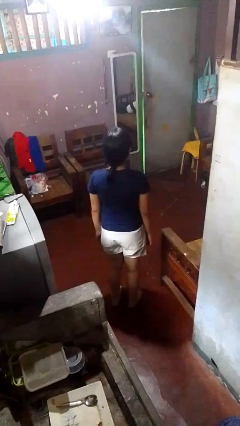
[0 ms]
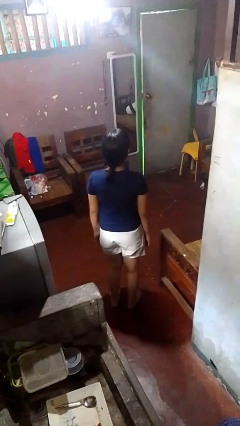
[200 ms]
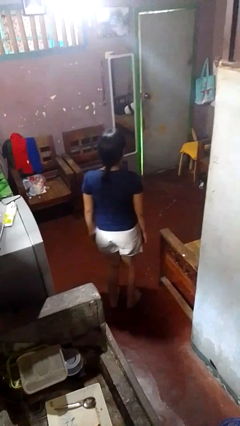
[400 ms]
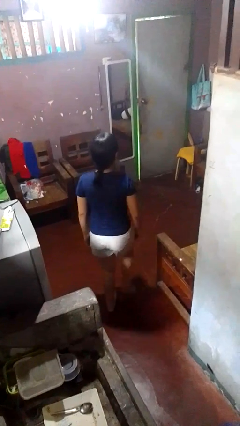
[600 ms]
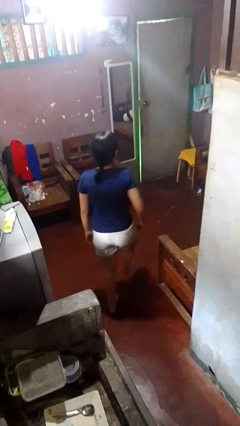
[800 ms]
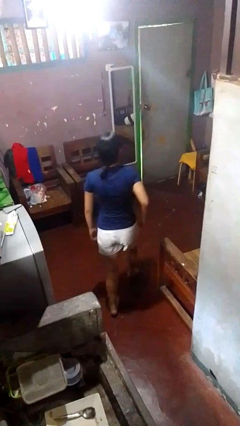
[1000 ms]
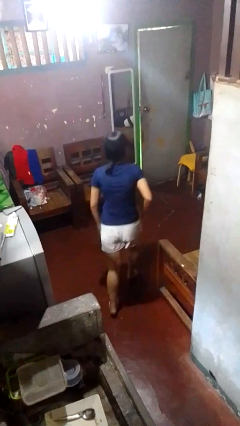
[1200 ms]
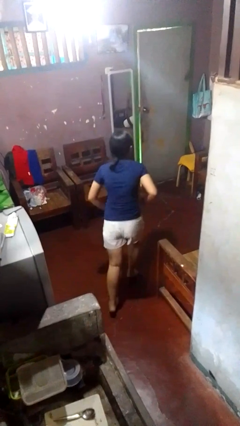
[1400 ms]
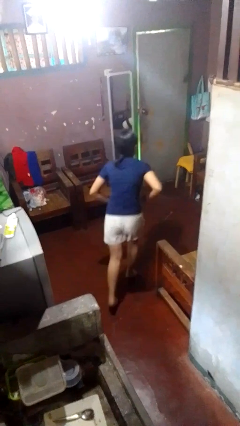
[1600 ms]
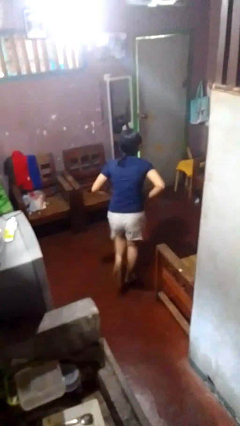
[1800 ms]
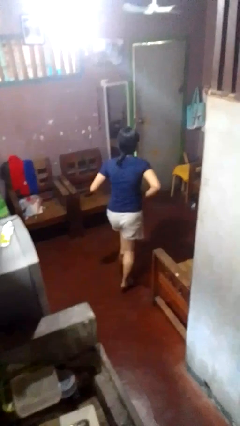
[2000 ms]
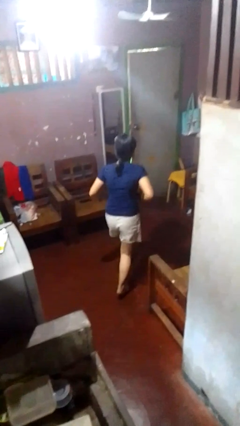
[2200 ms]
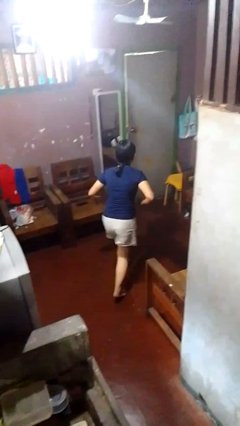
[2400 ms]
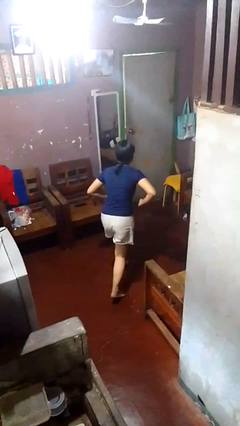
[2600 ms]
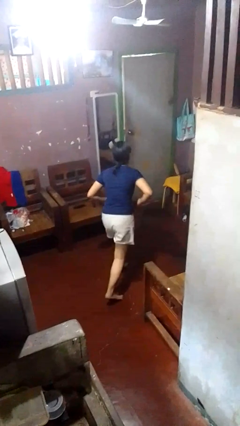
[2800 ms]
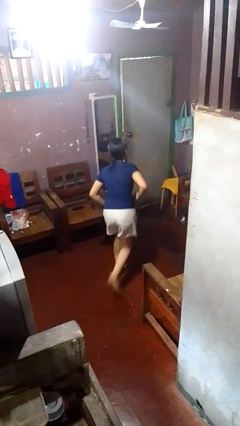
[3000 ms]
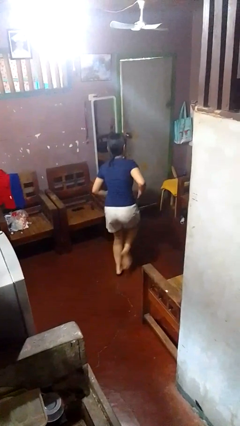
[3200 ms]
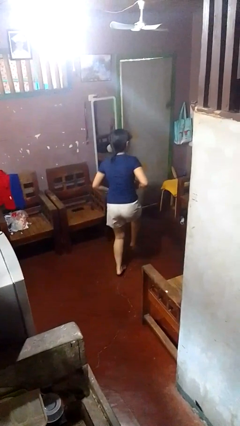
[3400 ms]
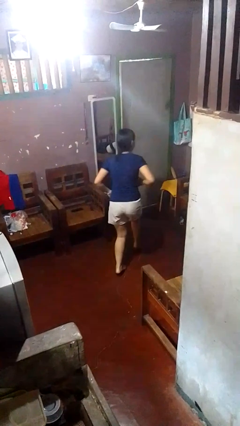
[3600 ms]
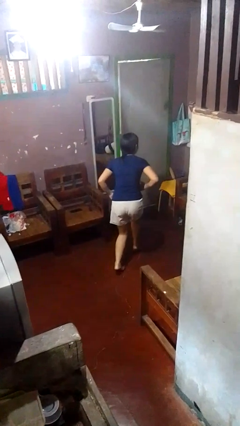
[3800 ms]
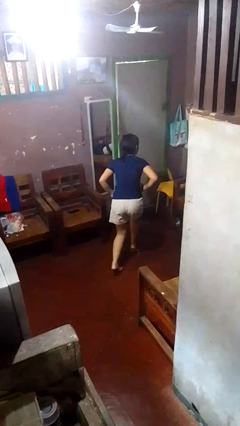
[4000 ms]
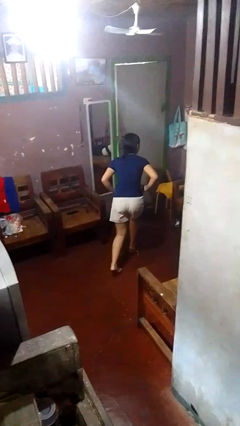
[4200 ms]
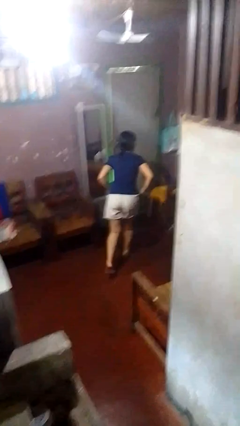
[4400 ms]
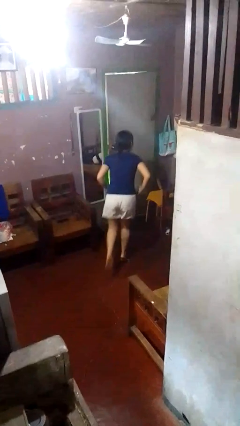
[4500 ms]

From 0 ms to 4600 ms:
person walks tiptoe

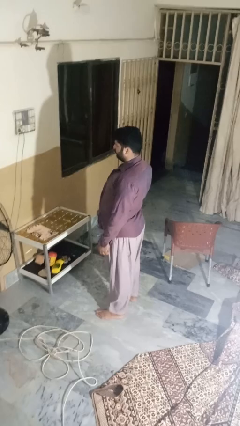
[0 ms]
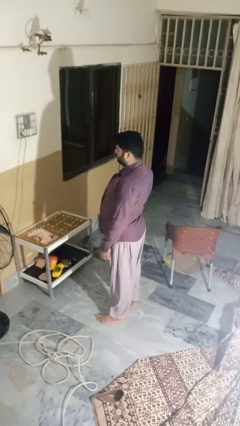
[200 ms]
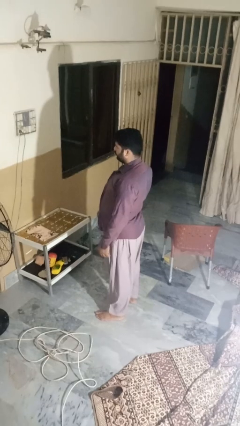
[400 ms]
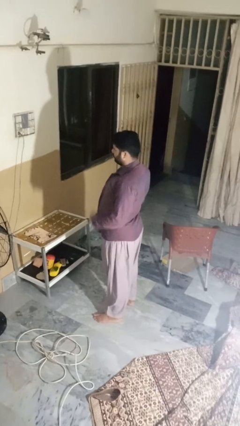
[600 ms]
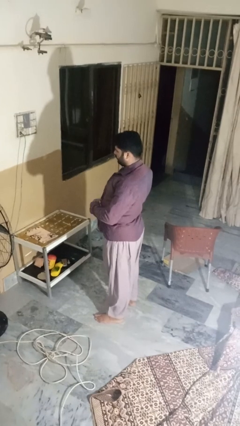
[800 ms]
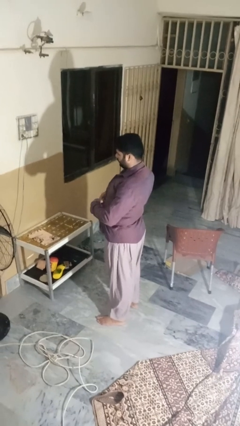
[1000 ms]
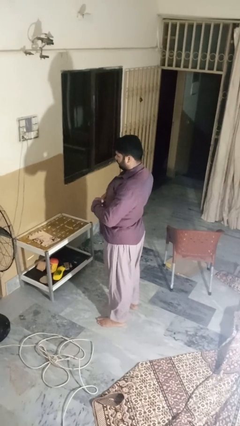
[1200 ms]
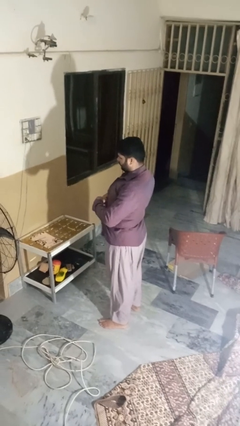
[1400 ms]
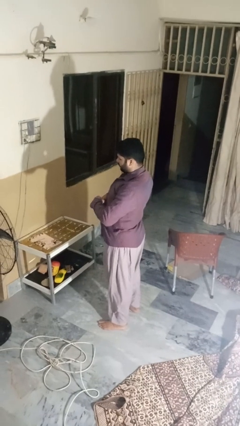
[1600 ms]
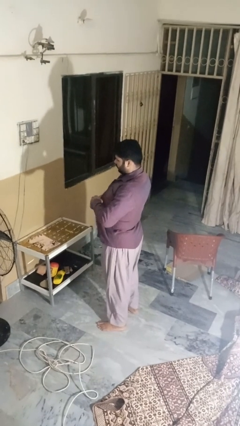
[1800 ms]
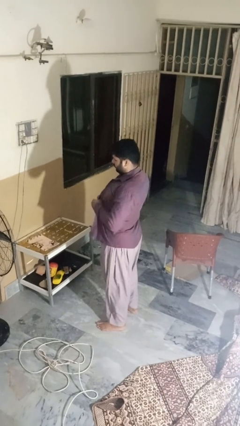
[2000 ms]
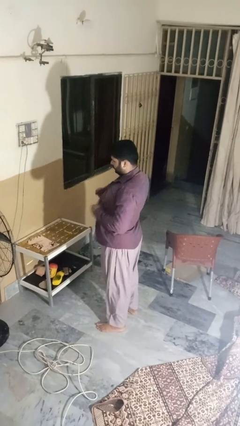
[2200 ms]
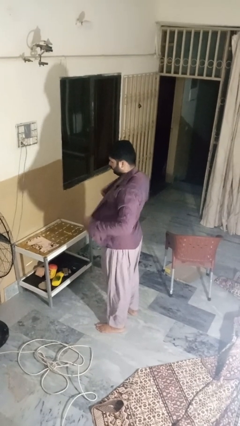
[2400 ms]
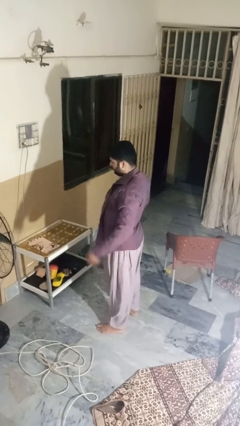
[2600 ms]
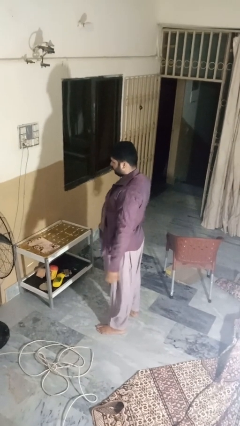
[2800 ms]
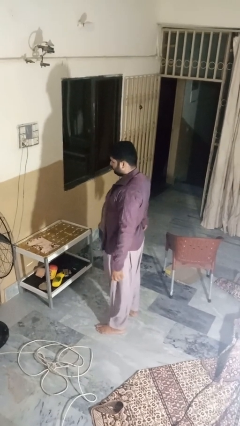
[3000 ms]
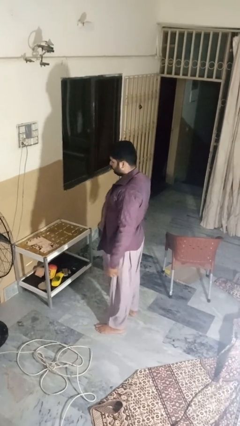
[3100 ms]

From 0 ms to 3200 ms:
person unbuttons shirt

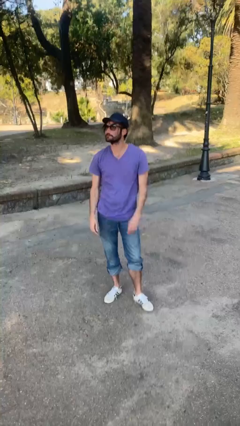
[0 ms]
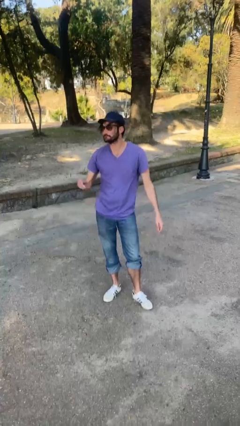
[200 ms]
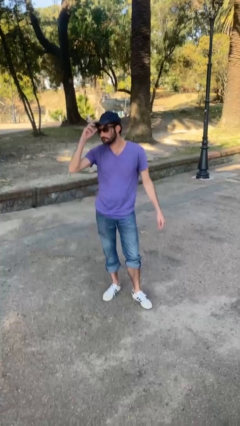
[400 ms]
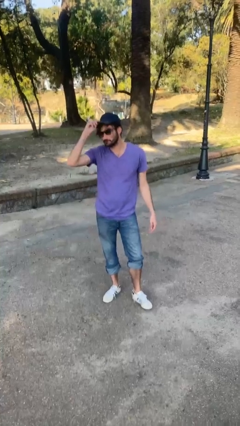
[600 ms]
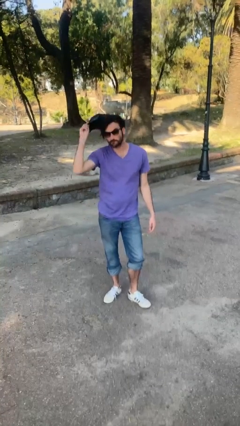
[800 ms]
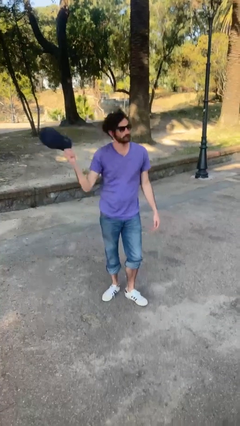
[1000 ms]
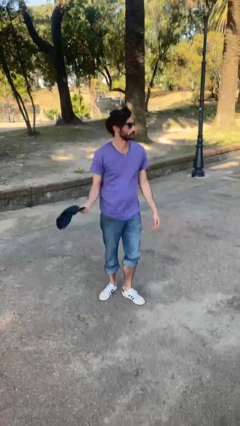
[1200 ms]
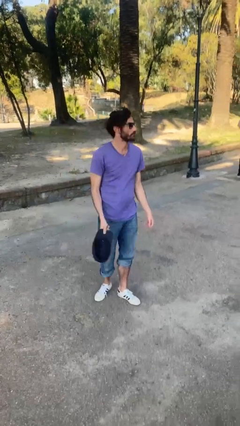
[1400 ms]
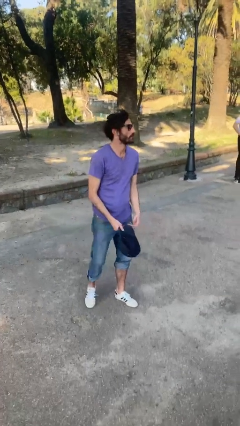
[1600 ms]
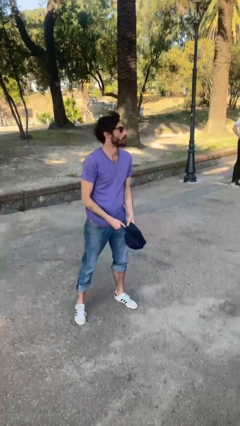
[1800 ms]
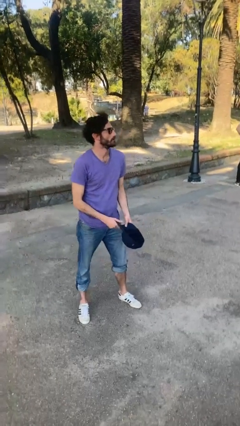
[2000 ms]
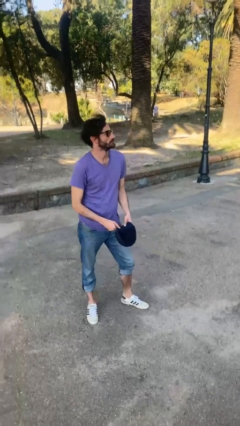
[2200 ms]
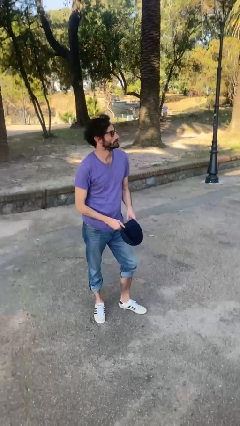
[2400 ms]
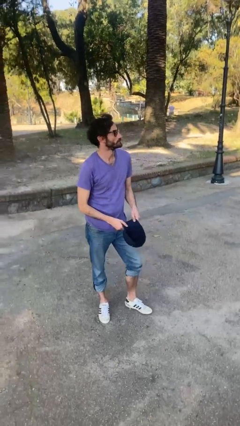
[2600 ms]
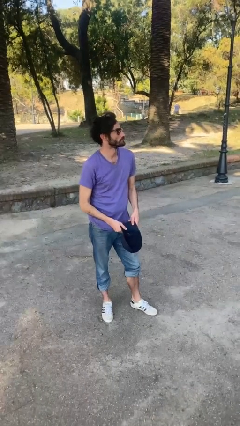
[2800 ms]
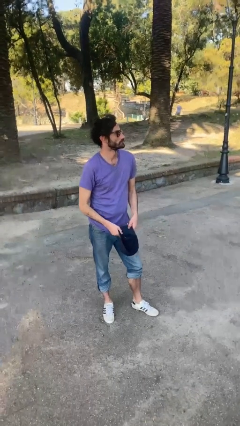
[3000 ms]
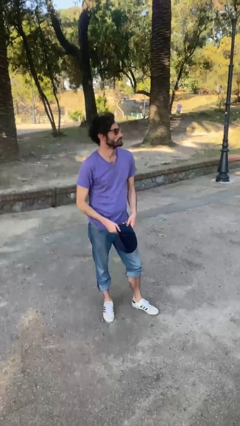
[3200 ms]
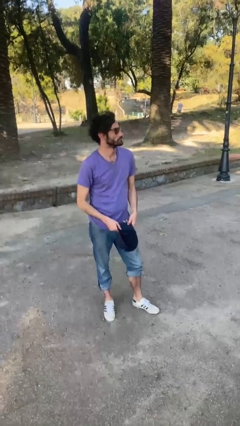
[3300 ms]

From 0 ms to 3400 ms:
person takes off hat

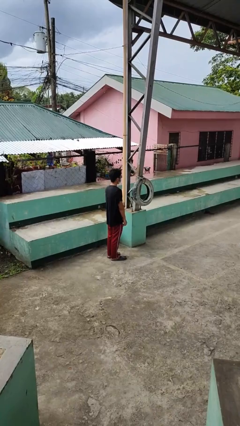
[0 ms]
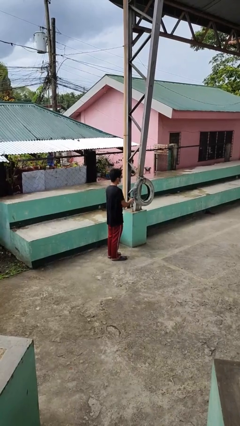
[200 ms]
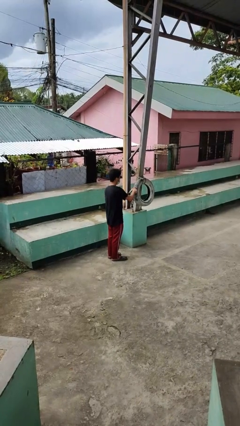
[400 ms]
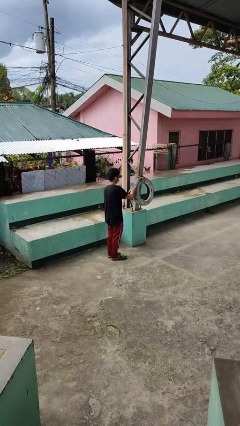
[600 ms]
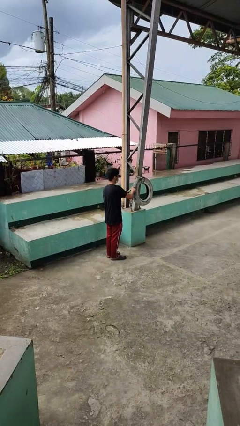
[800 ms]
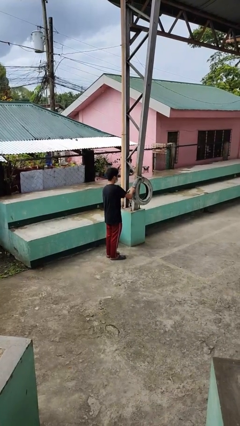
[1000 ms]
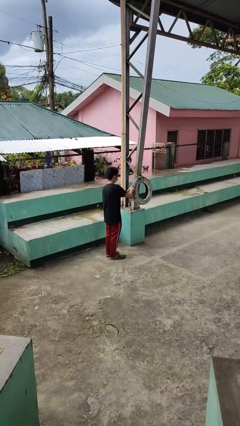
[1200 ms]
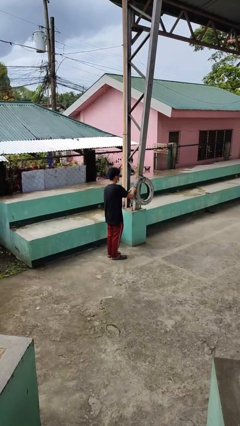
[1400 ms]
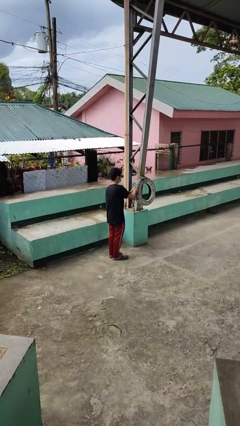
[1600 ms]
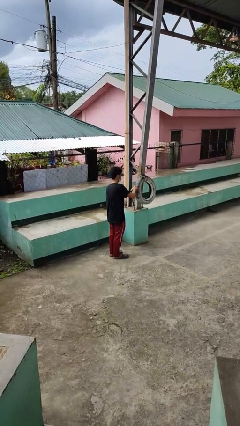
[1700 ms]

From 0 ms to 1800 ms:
person taps object with finger

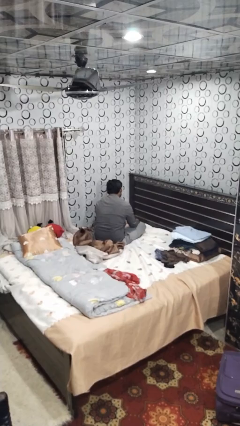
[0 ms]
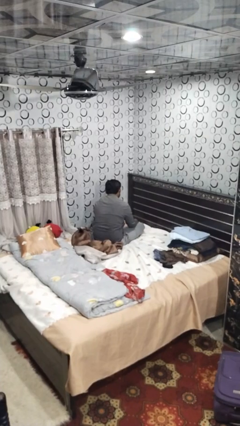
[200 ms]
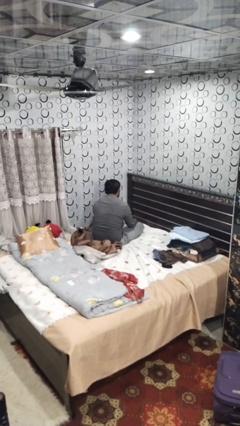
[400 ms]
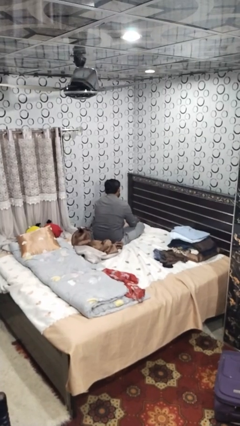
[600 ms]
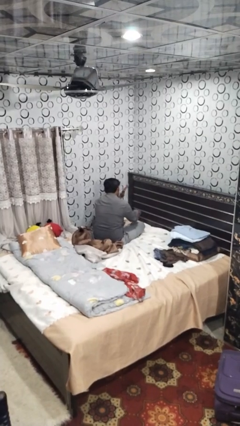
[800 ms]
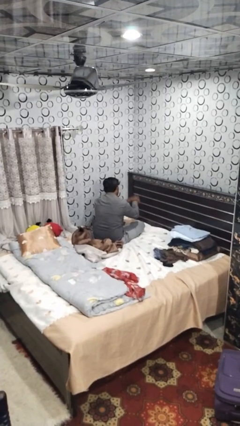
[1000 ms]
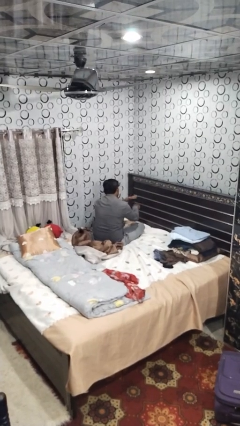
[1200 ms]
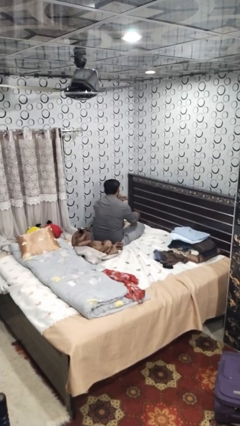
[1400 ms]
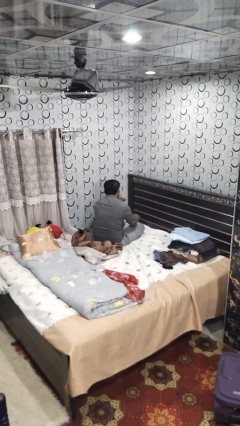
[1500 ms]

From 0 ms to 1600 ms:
person swats bug

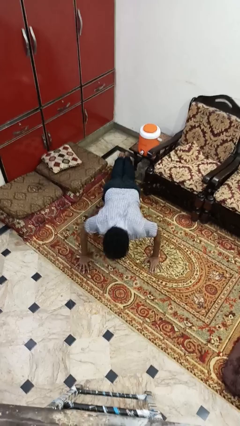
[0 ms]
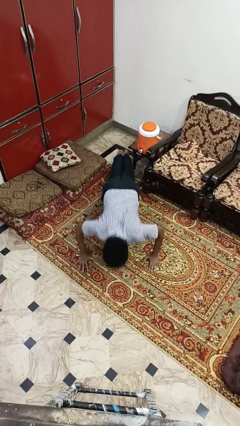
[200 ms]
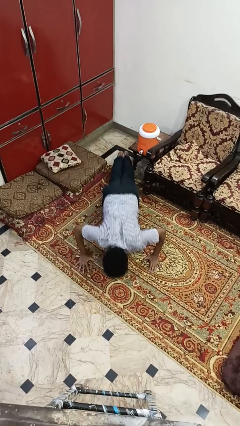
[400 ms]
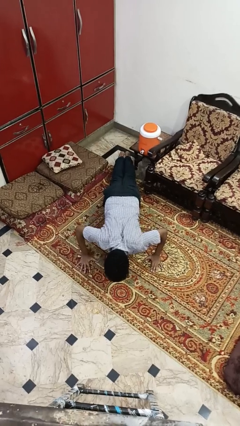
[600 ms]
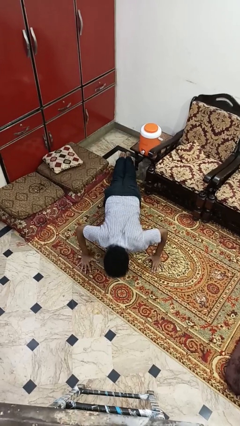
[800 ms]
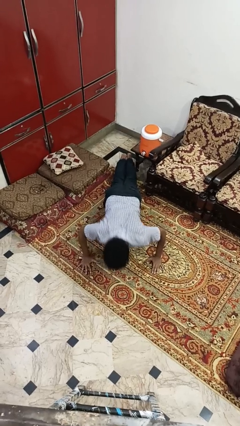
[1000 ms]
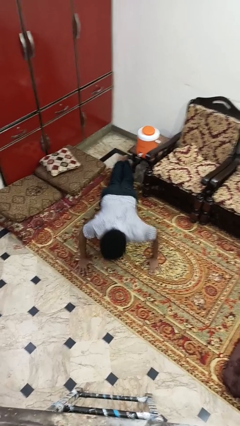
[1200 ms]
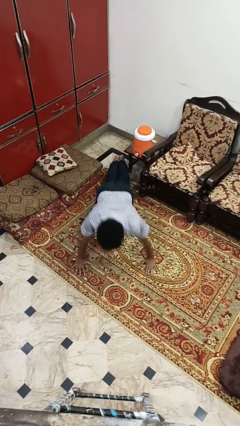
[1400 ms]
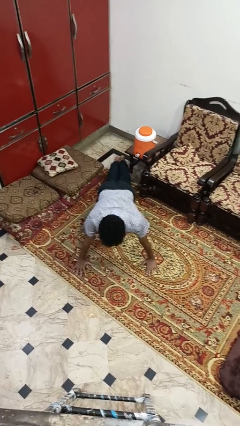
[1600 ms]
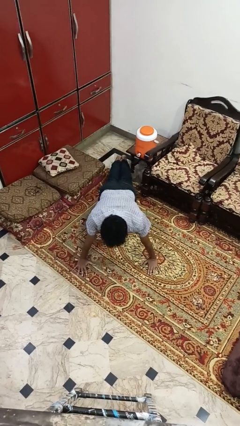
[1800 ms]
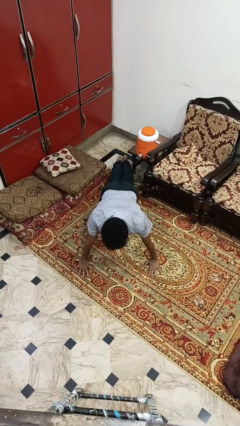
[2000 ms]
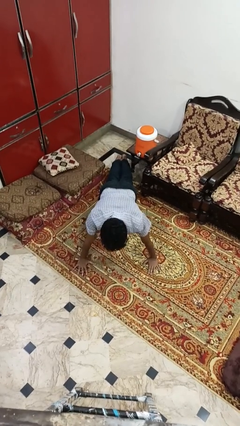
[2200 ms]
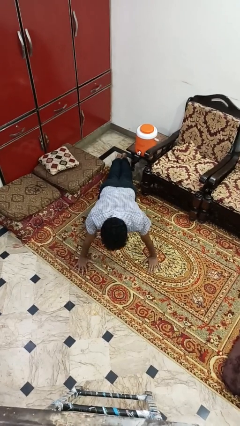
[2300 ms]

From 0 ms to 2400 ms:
person exercises with pushup

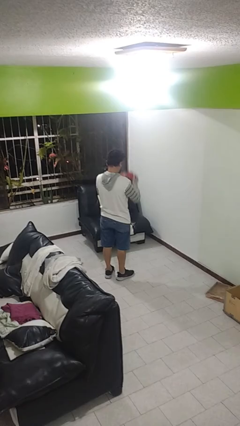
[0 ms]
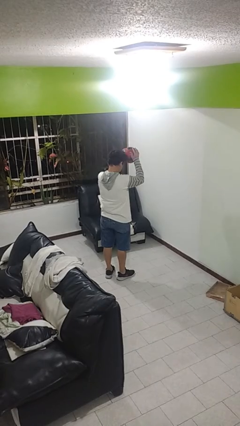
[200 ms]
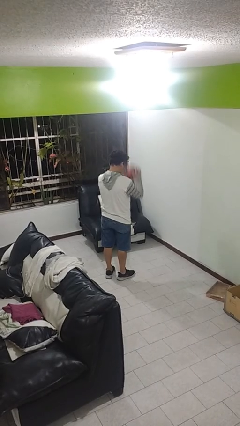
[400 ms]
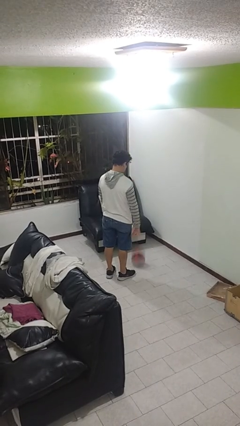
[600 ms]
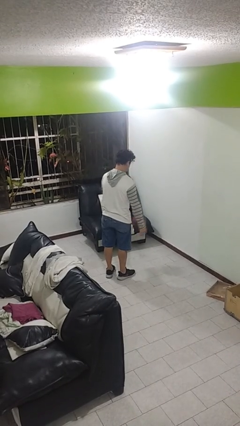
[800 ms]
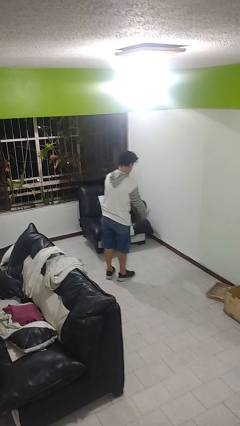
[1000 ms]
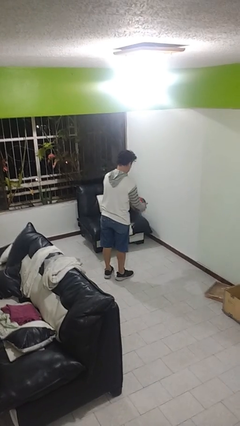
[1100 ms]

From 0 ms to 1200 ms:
person bounces ball on floor
